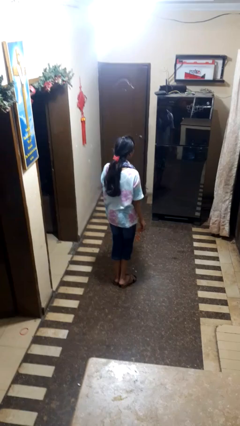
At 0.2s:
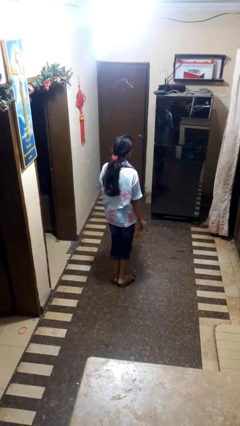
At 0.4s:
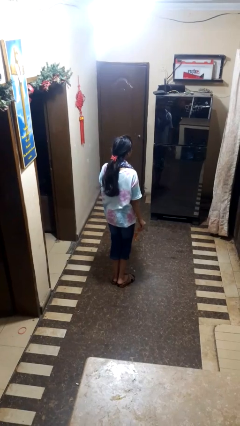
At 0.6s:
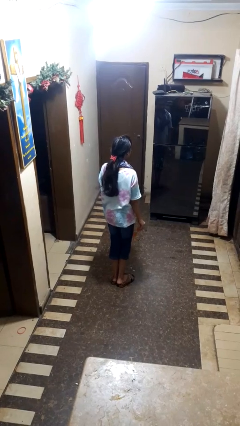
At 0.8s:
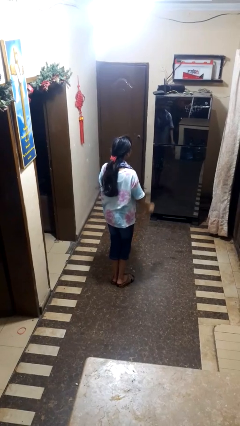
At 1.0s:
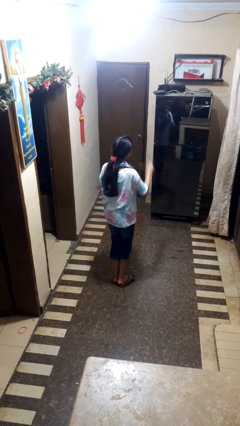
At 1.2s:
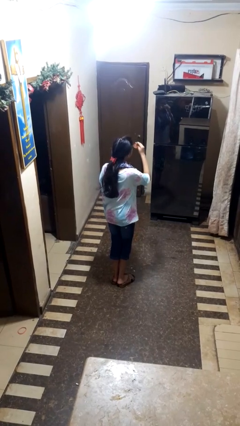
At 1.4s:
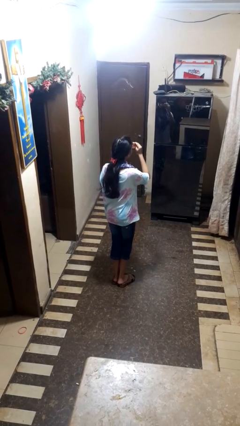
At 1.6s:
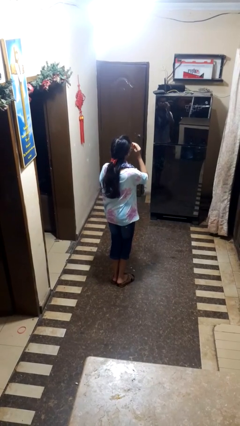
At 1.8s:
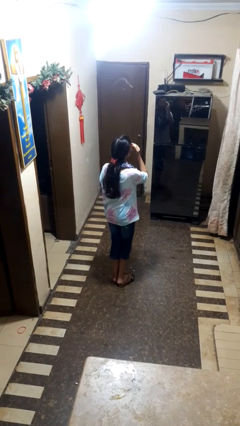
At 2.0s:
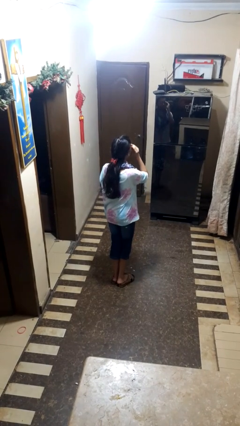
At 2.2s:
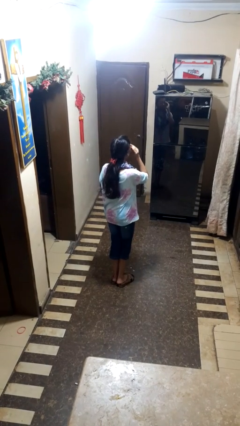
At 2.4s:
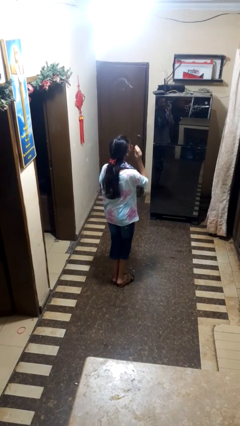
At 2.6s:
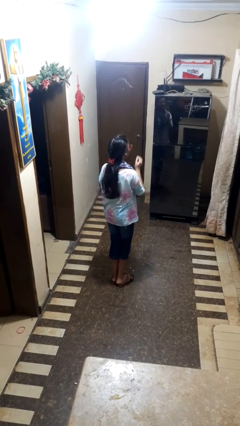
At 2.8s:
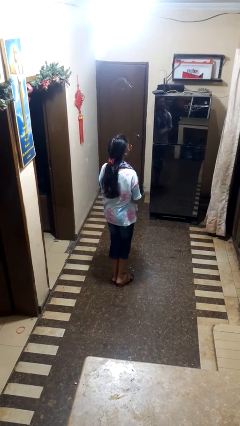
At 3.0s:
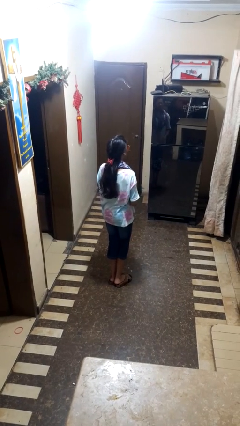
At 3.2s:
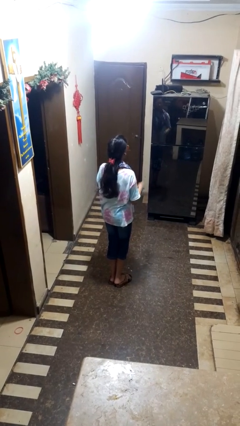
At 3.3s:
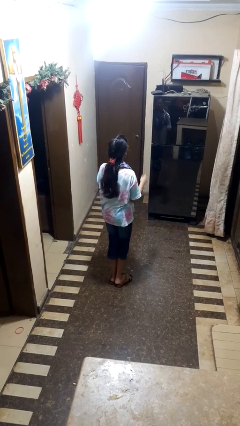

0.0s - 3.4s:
person puts on sunglasses

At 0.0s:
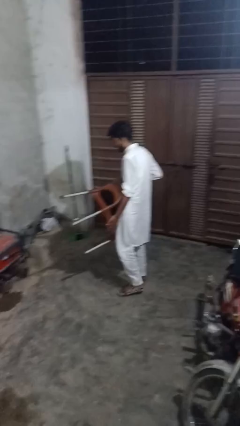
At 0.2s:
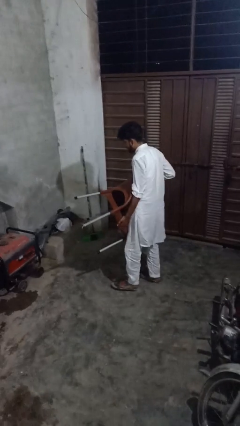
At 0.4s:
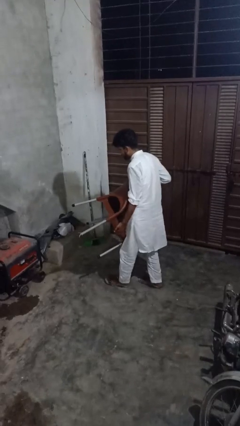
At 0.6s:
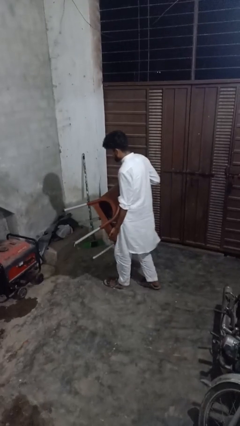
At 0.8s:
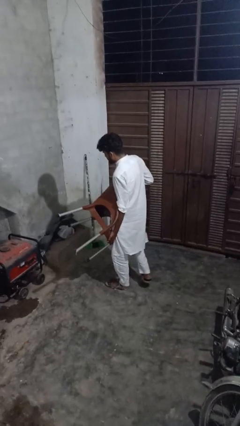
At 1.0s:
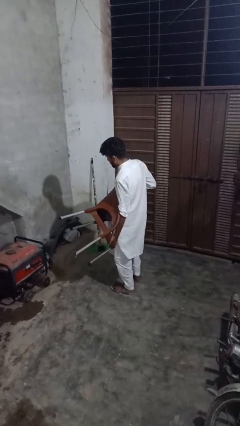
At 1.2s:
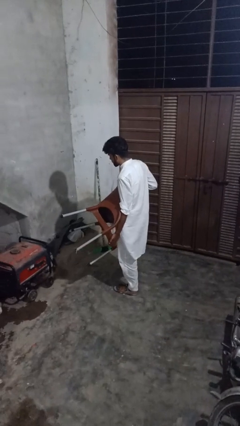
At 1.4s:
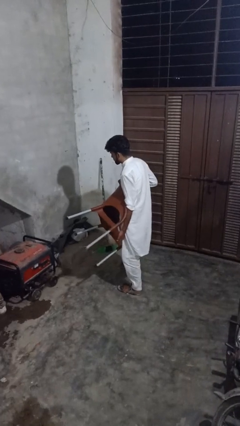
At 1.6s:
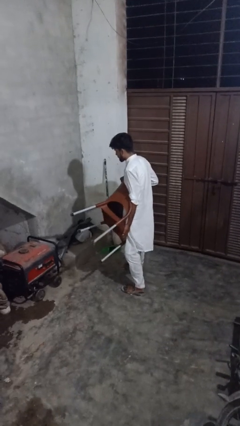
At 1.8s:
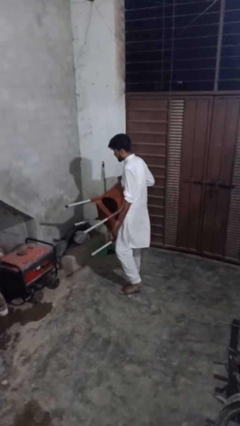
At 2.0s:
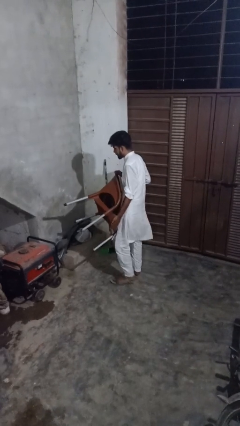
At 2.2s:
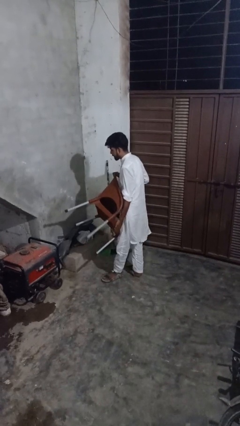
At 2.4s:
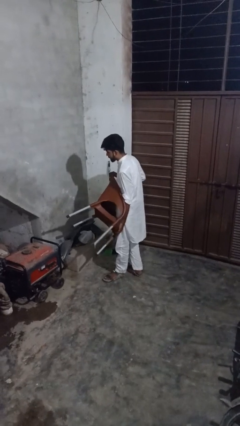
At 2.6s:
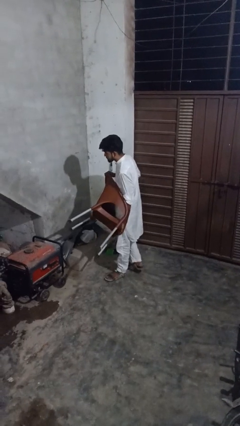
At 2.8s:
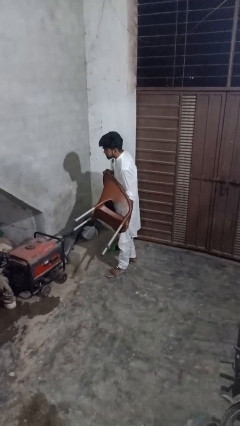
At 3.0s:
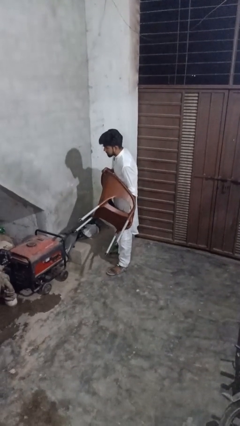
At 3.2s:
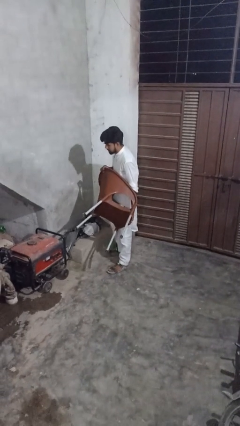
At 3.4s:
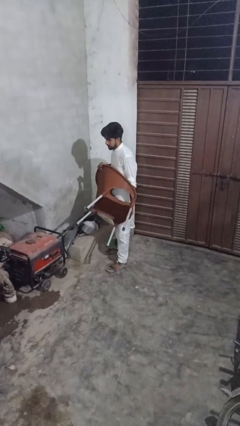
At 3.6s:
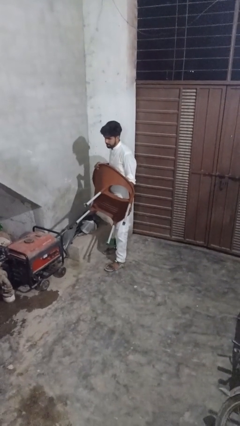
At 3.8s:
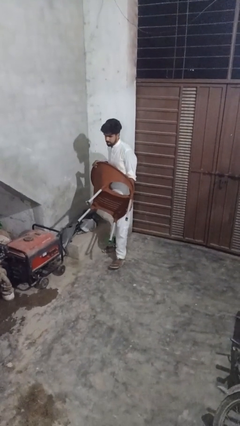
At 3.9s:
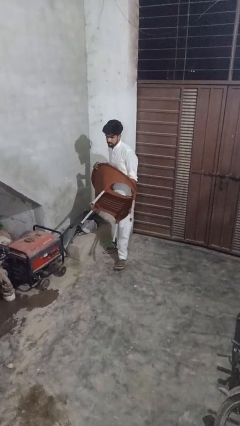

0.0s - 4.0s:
person carries furniture

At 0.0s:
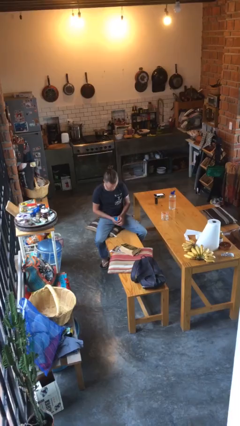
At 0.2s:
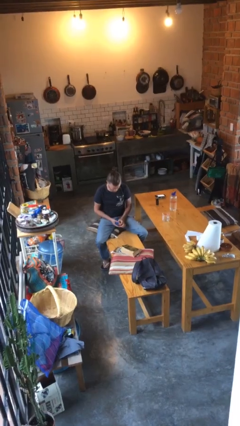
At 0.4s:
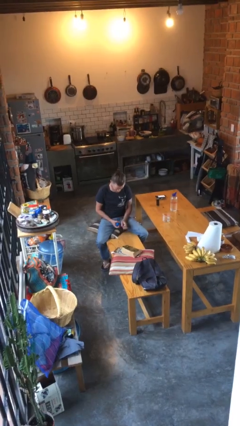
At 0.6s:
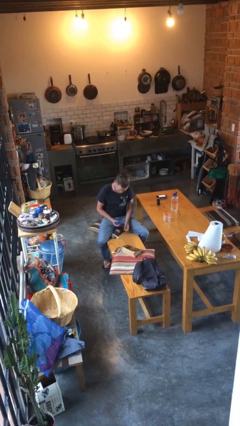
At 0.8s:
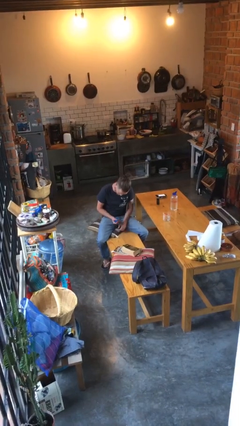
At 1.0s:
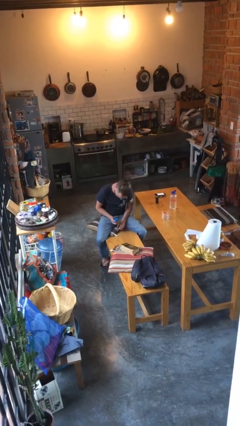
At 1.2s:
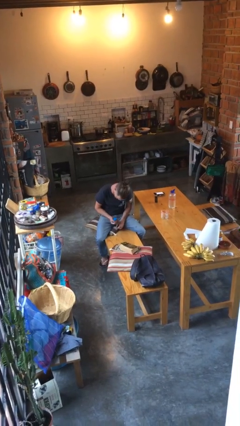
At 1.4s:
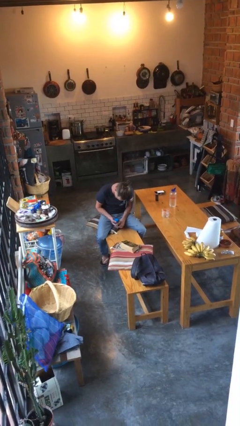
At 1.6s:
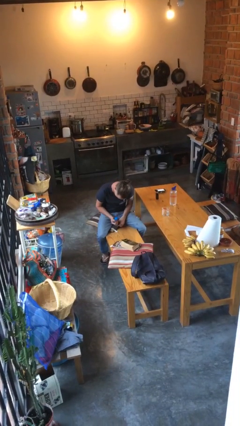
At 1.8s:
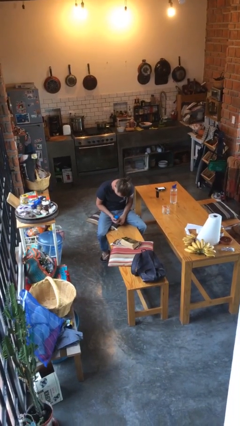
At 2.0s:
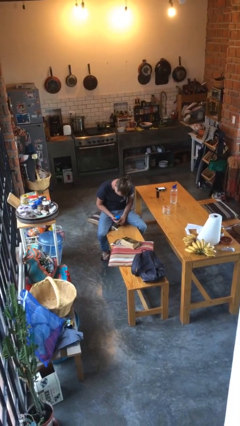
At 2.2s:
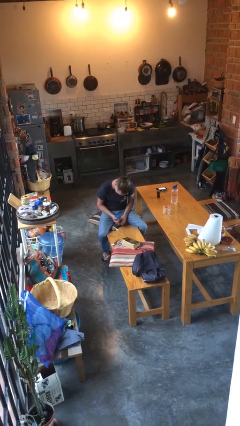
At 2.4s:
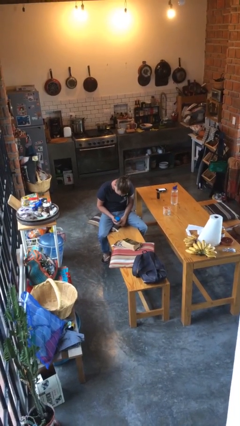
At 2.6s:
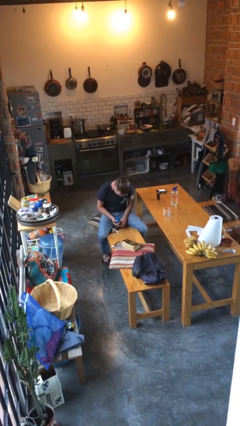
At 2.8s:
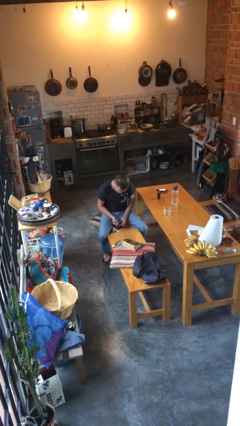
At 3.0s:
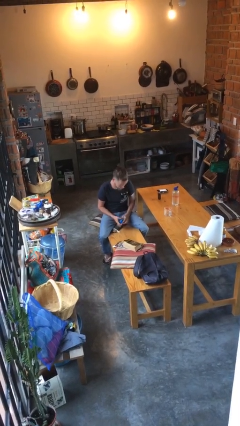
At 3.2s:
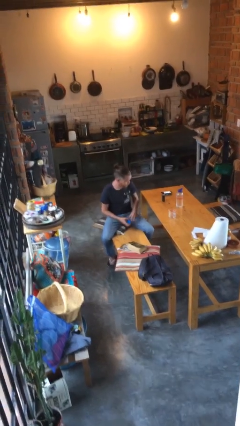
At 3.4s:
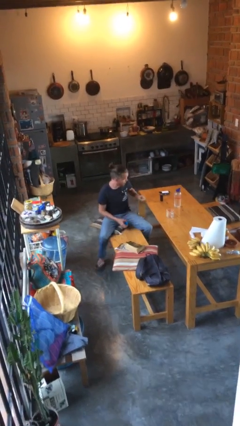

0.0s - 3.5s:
person squeezes object

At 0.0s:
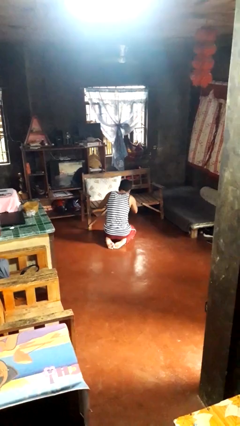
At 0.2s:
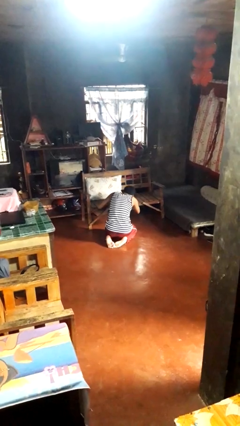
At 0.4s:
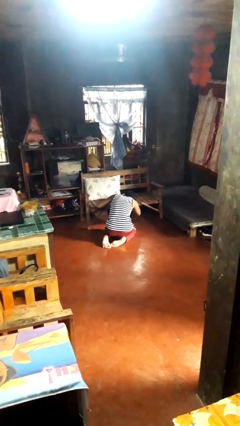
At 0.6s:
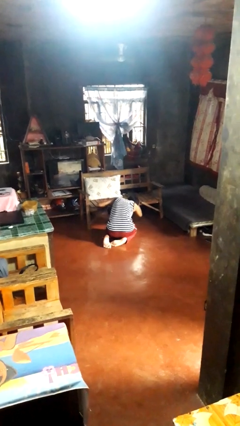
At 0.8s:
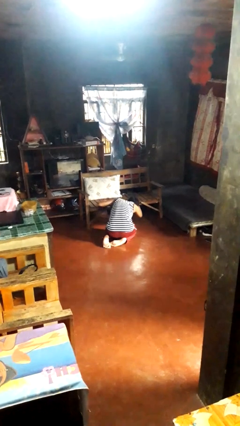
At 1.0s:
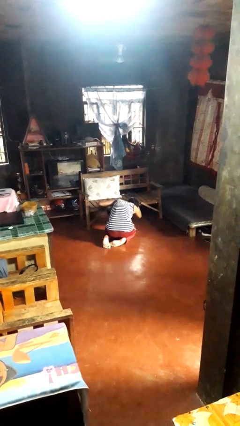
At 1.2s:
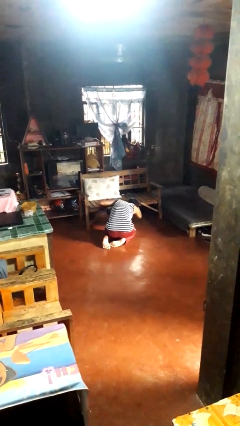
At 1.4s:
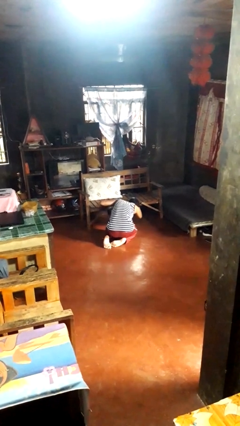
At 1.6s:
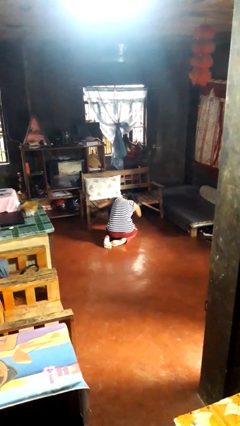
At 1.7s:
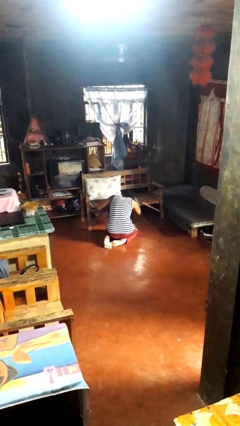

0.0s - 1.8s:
person searches under couch

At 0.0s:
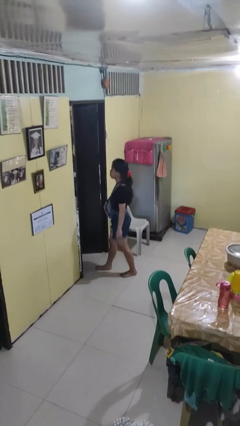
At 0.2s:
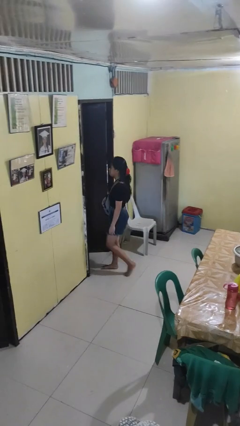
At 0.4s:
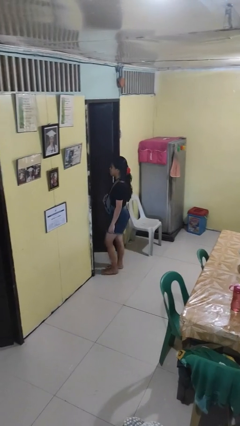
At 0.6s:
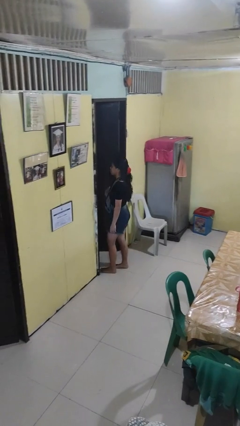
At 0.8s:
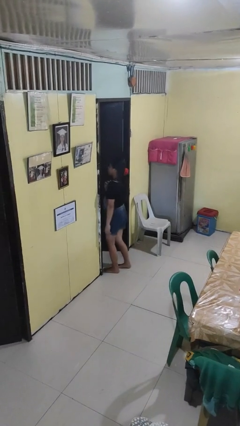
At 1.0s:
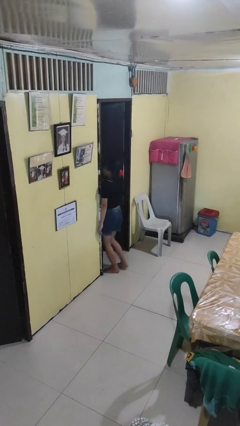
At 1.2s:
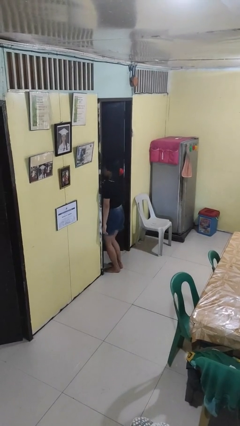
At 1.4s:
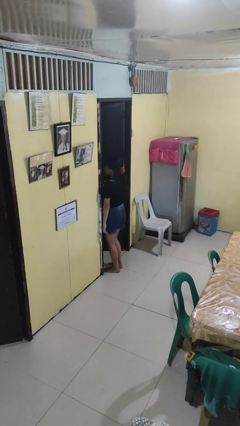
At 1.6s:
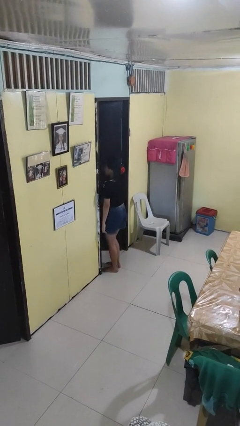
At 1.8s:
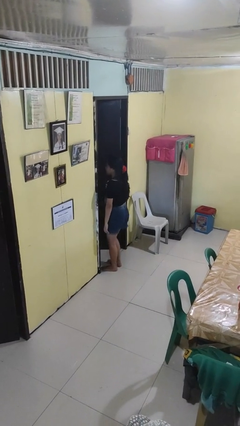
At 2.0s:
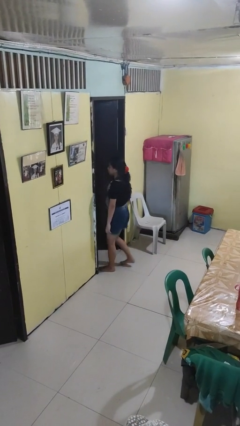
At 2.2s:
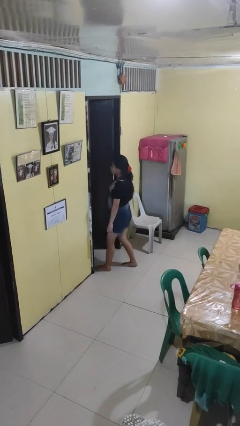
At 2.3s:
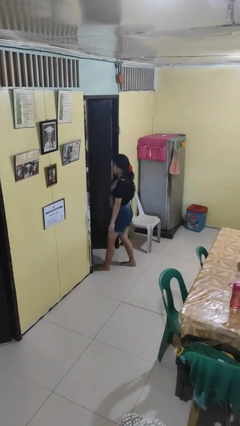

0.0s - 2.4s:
person bumps into wall

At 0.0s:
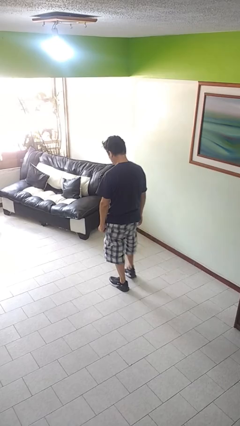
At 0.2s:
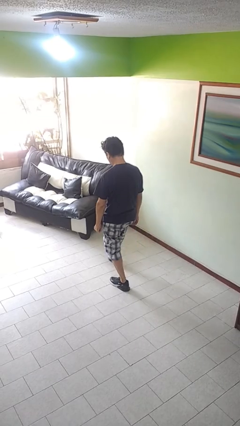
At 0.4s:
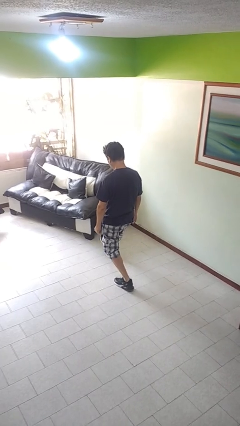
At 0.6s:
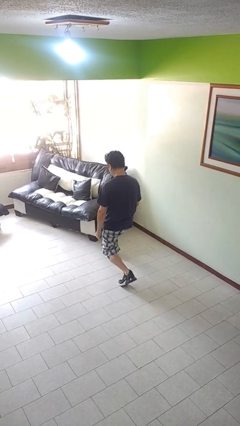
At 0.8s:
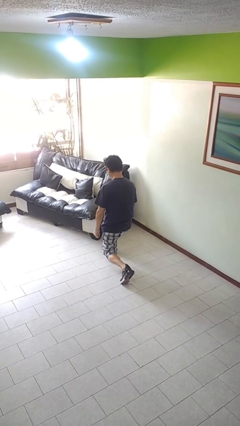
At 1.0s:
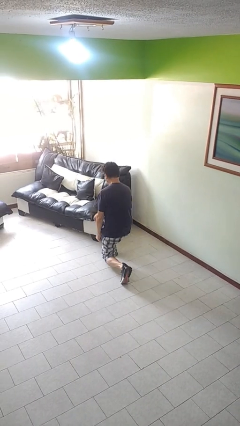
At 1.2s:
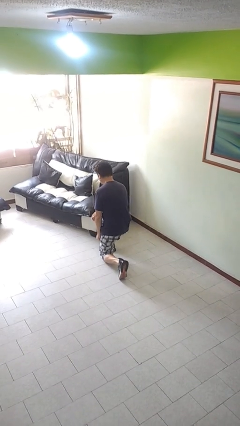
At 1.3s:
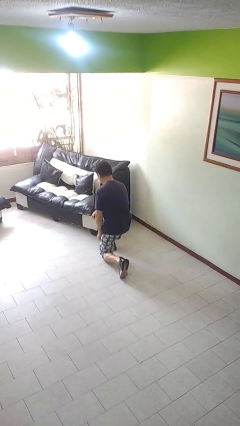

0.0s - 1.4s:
person kneels

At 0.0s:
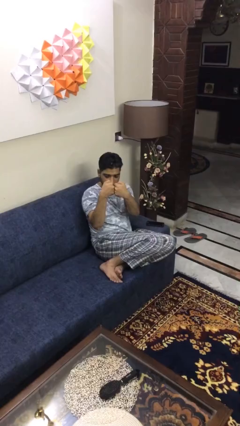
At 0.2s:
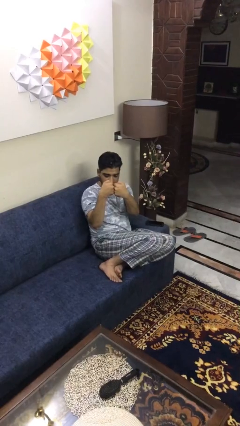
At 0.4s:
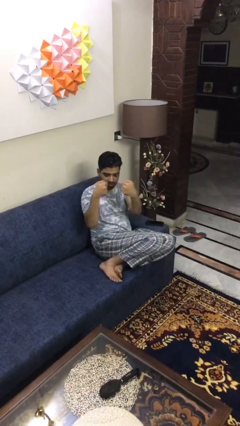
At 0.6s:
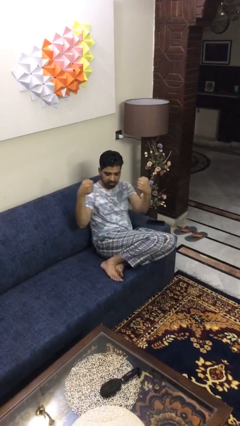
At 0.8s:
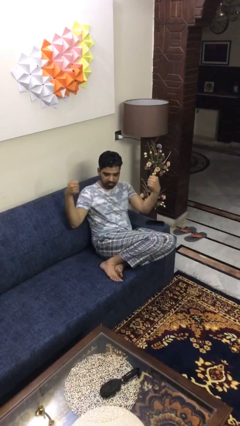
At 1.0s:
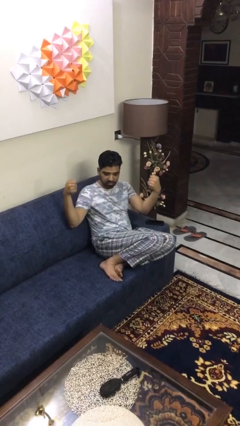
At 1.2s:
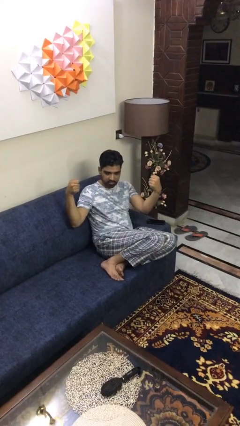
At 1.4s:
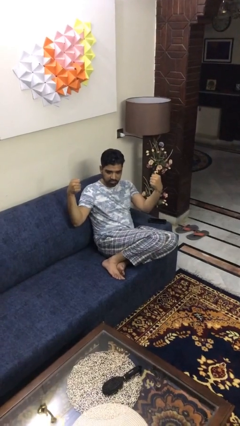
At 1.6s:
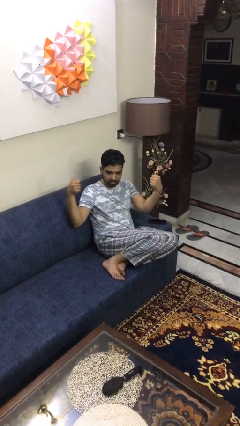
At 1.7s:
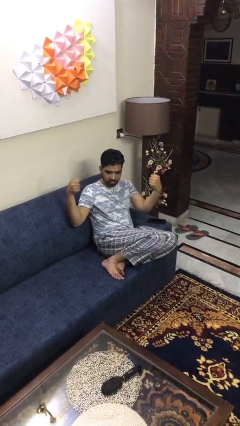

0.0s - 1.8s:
person gestures zoom in
